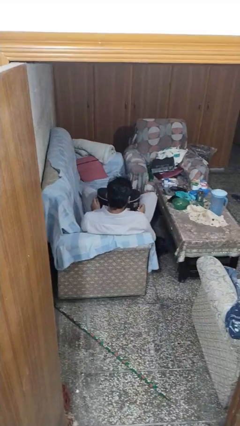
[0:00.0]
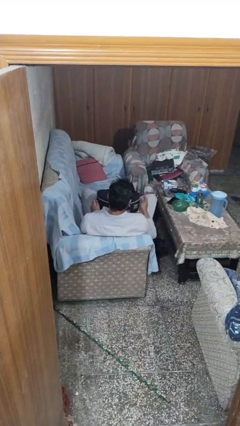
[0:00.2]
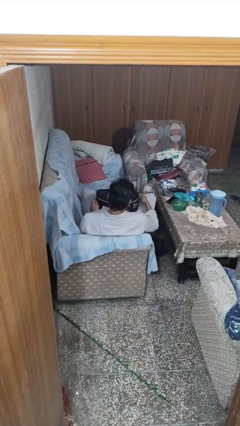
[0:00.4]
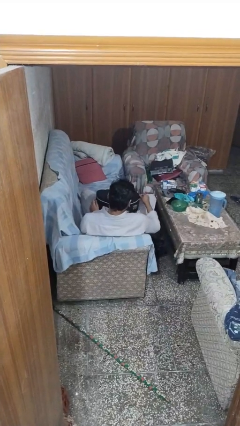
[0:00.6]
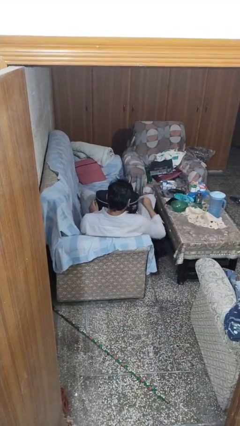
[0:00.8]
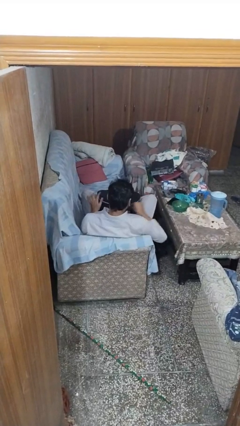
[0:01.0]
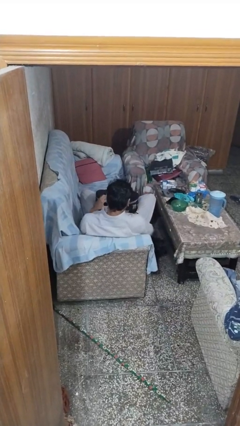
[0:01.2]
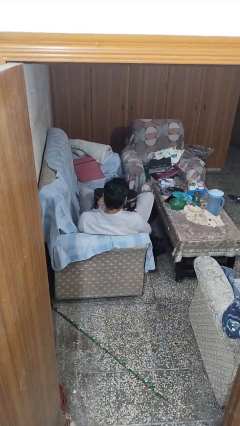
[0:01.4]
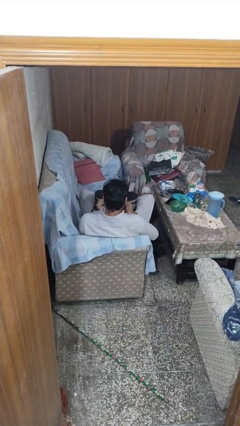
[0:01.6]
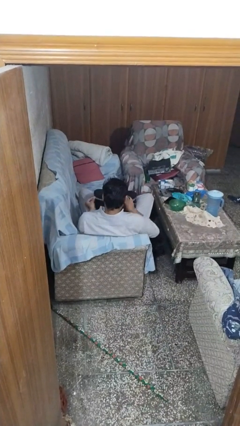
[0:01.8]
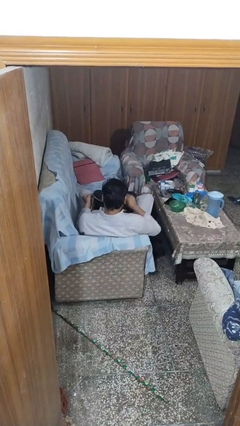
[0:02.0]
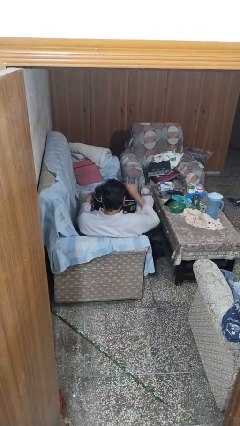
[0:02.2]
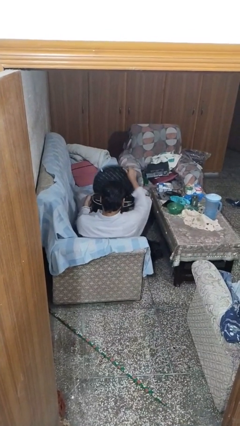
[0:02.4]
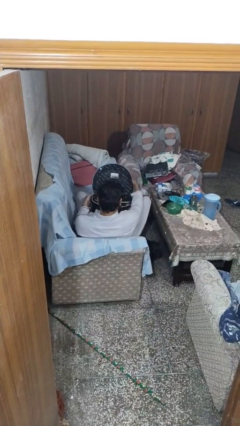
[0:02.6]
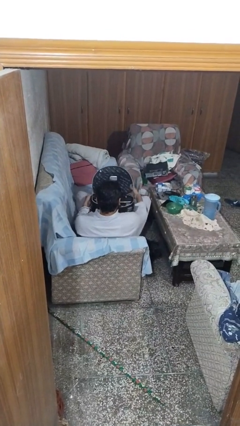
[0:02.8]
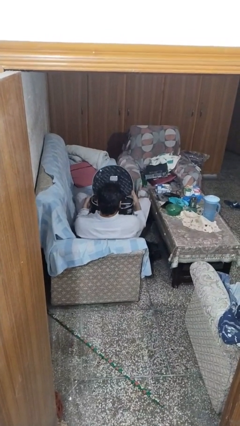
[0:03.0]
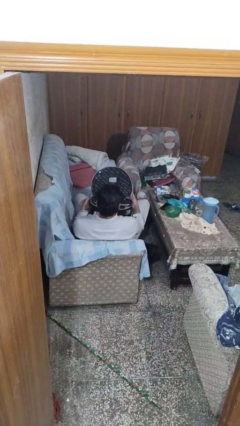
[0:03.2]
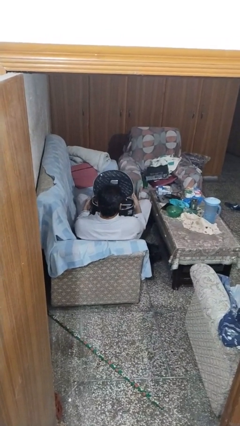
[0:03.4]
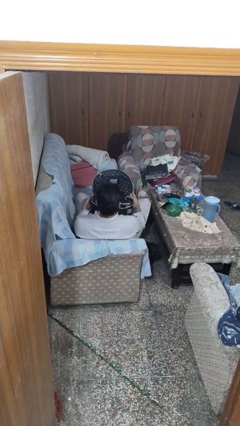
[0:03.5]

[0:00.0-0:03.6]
person opens suitcase

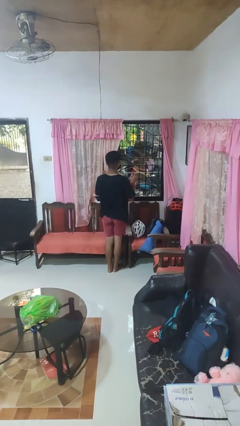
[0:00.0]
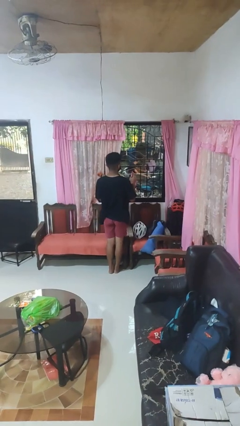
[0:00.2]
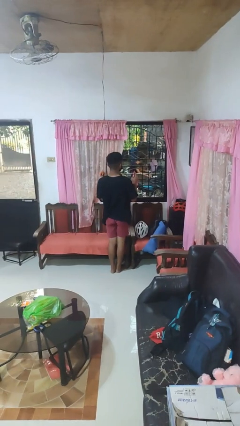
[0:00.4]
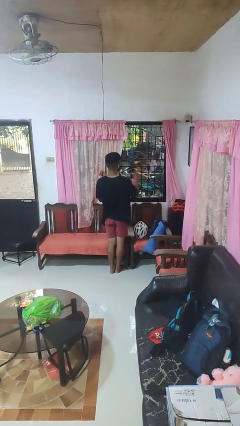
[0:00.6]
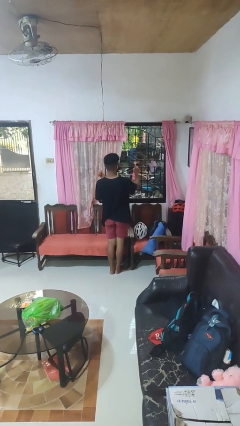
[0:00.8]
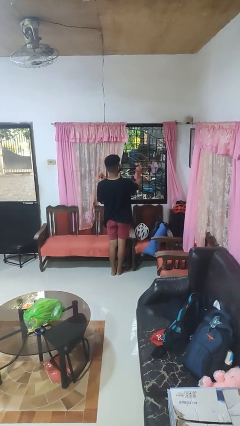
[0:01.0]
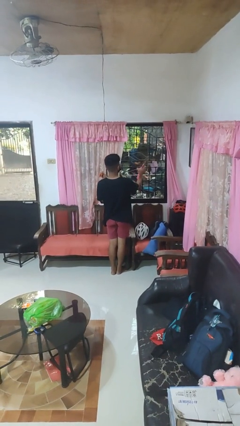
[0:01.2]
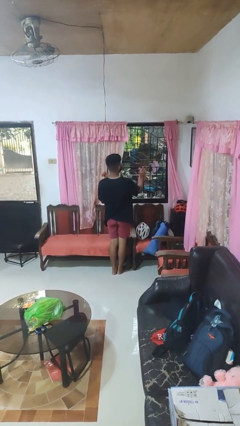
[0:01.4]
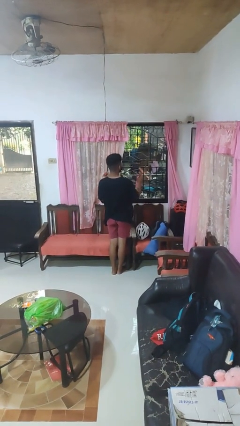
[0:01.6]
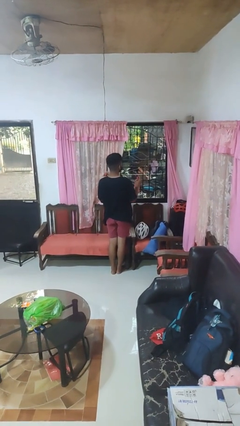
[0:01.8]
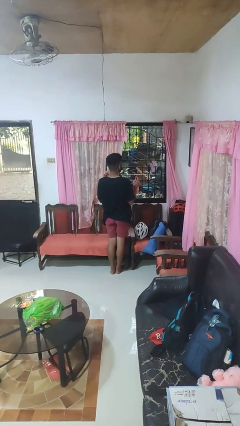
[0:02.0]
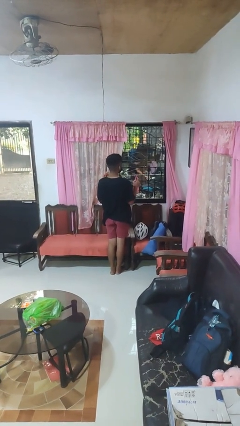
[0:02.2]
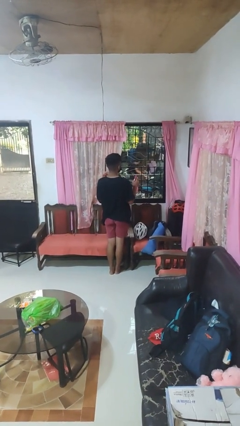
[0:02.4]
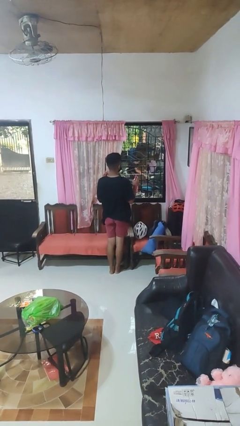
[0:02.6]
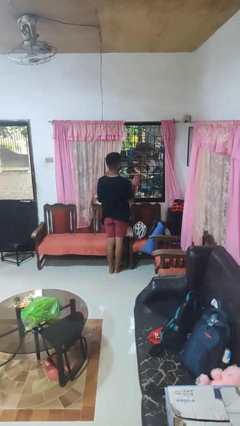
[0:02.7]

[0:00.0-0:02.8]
person sprays from bottle

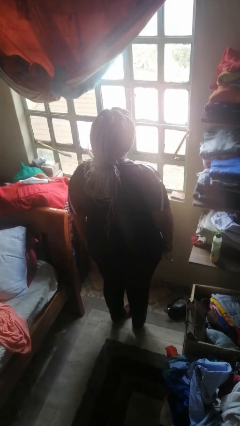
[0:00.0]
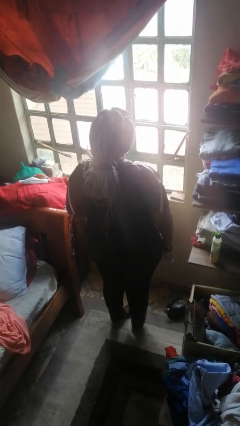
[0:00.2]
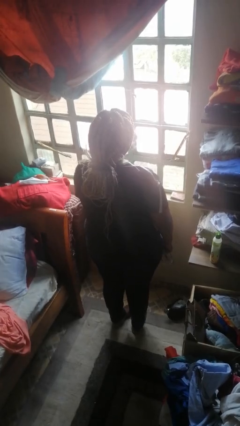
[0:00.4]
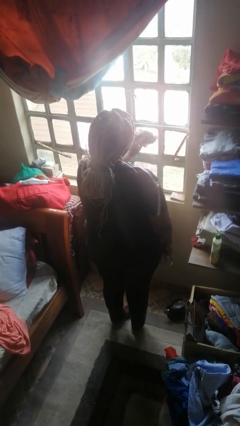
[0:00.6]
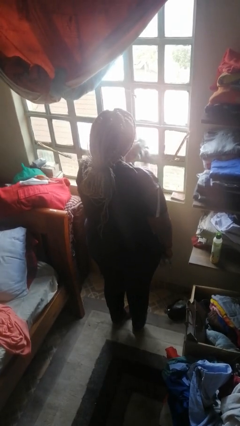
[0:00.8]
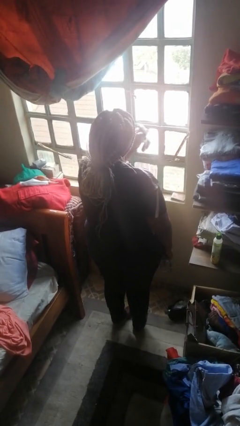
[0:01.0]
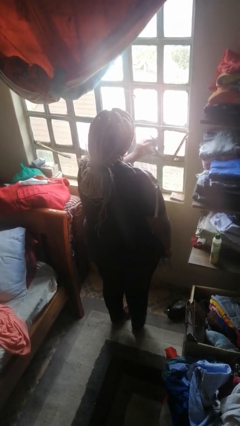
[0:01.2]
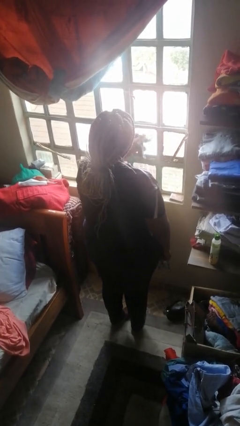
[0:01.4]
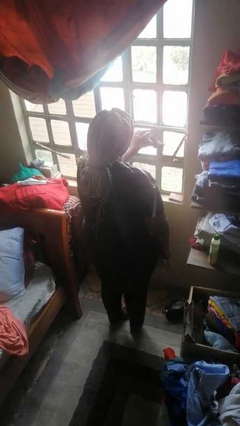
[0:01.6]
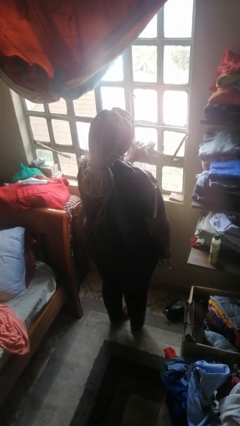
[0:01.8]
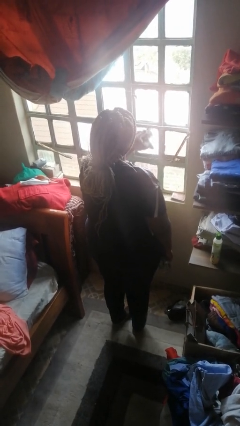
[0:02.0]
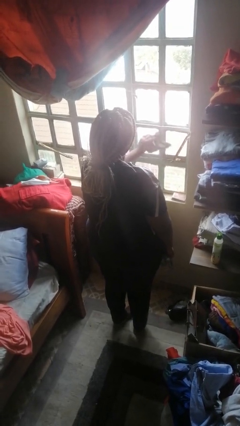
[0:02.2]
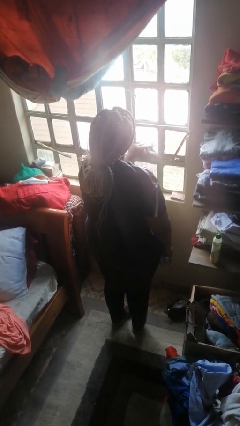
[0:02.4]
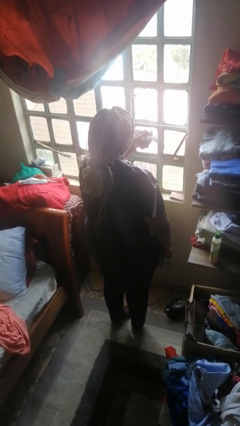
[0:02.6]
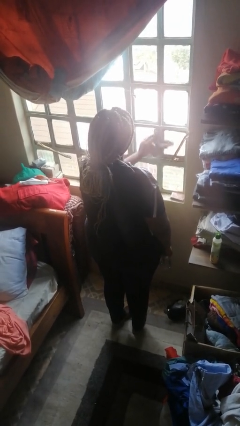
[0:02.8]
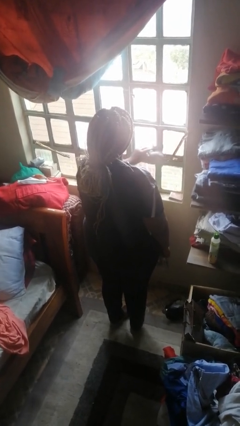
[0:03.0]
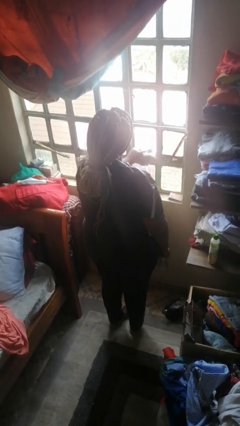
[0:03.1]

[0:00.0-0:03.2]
person washes window

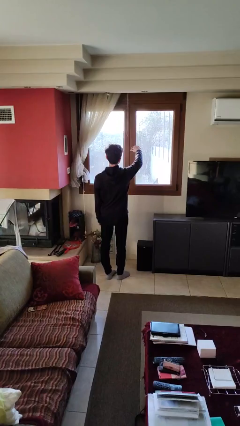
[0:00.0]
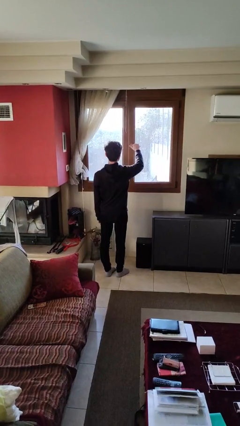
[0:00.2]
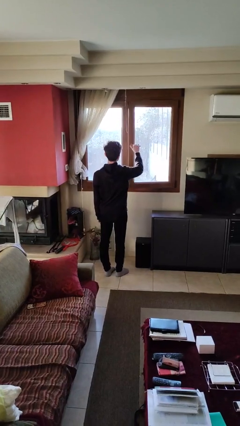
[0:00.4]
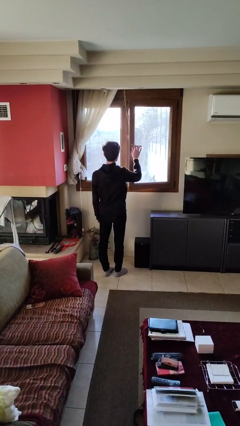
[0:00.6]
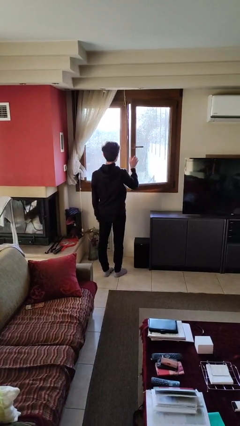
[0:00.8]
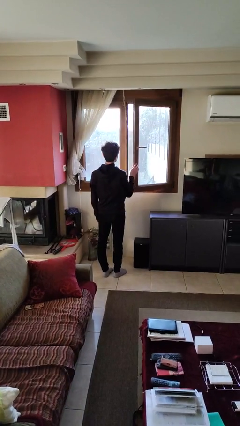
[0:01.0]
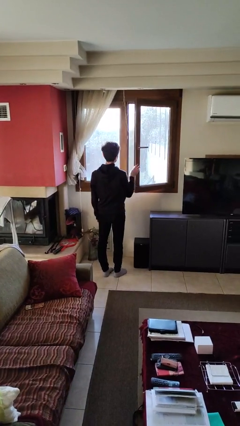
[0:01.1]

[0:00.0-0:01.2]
person opens home window

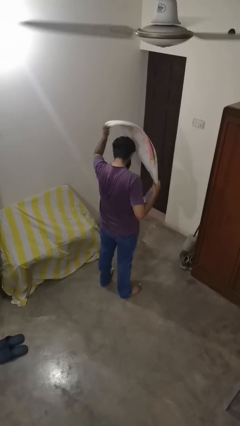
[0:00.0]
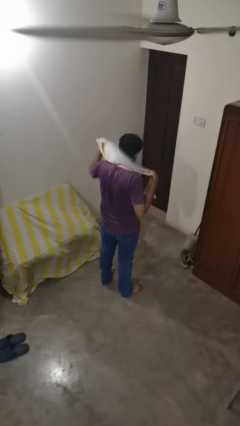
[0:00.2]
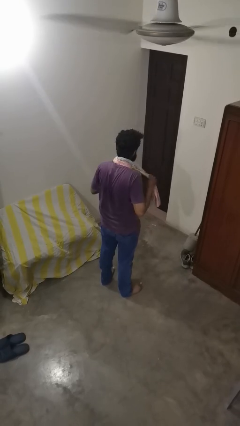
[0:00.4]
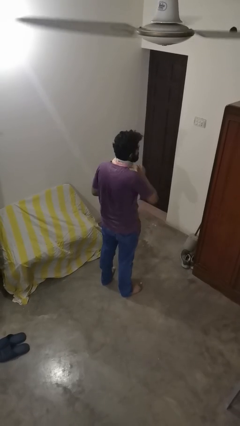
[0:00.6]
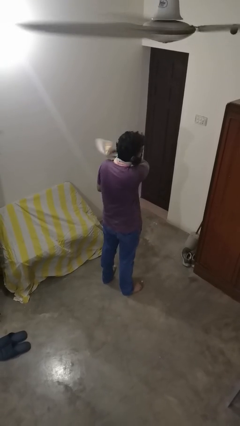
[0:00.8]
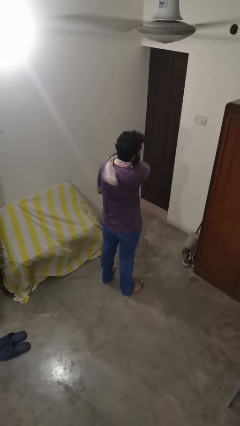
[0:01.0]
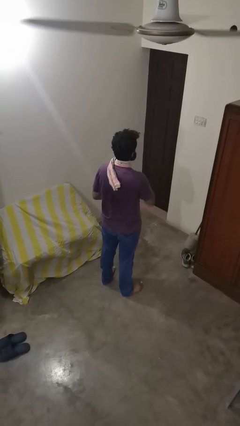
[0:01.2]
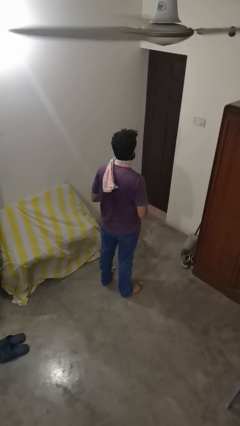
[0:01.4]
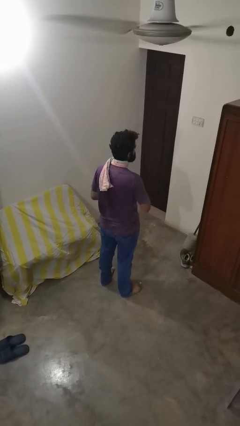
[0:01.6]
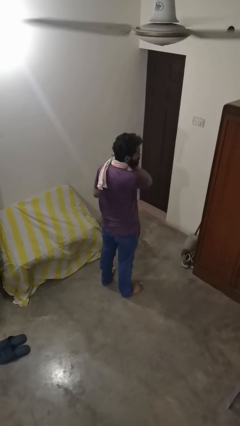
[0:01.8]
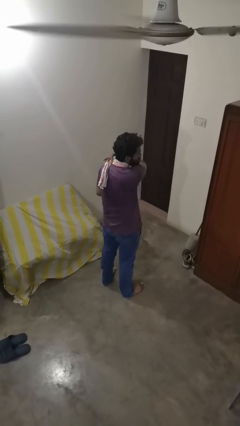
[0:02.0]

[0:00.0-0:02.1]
person puts on scarf

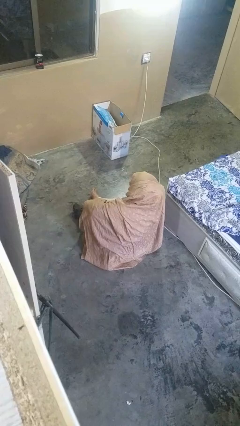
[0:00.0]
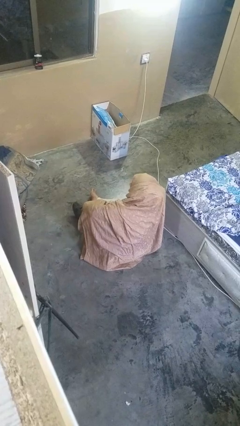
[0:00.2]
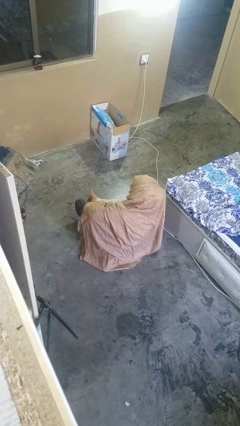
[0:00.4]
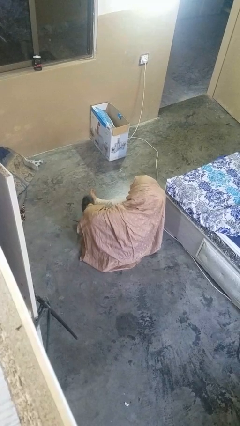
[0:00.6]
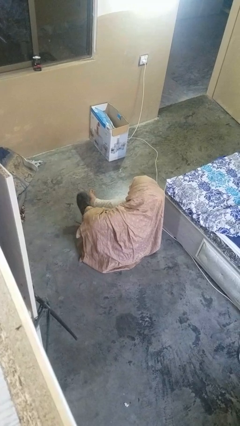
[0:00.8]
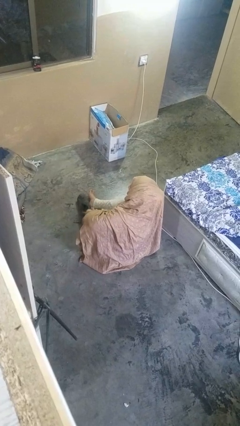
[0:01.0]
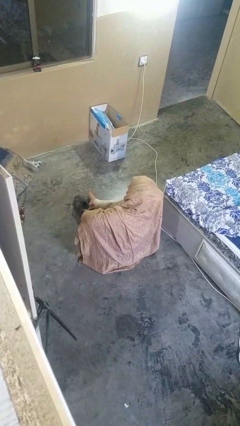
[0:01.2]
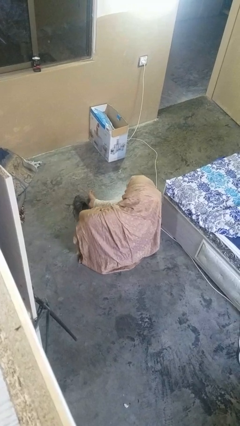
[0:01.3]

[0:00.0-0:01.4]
person takes off shoes

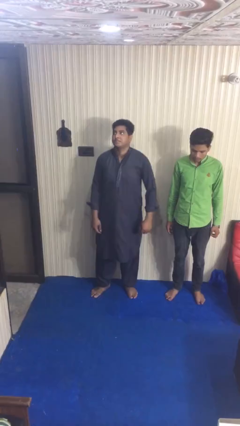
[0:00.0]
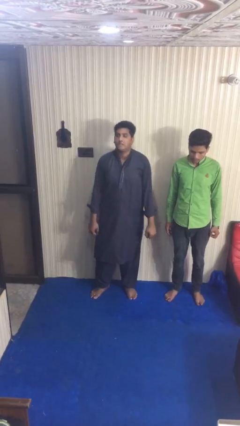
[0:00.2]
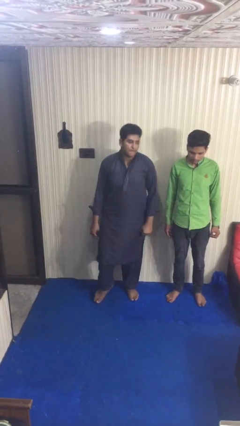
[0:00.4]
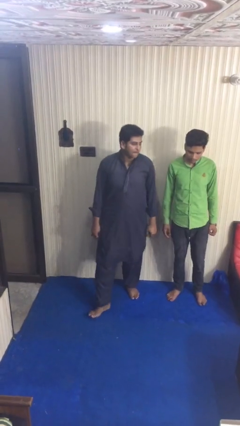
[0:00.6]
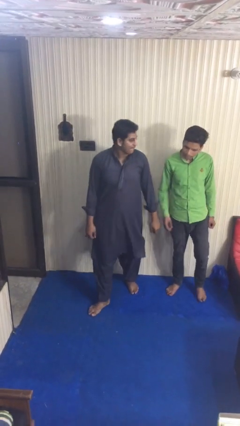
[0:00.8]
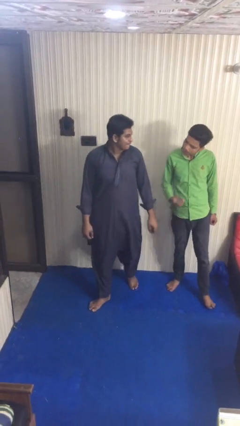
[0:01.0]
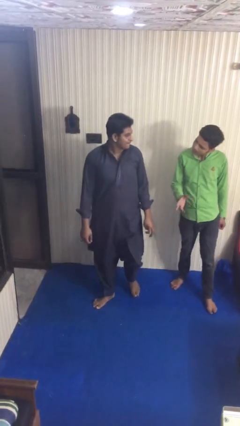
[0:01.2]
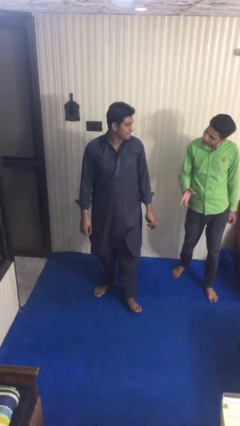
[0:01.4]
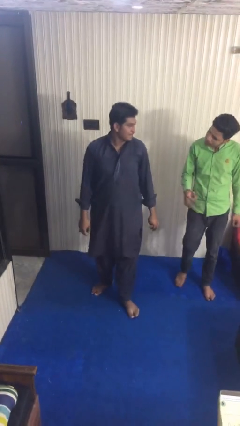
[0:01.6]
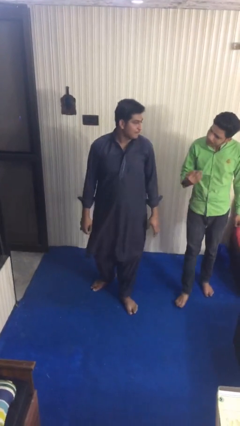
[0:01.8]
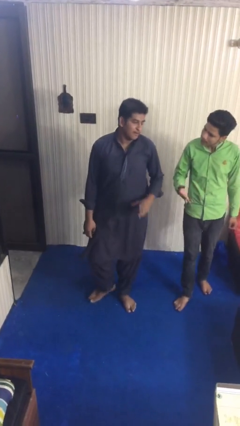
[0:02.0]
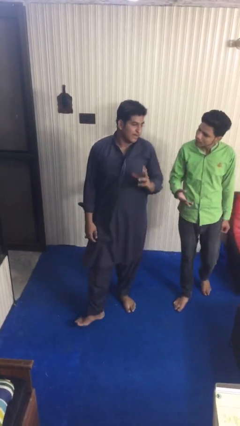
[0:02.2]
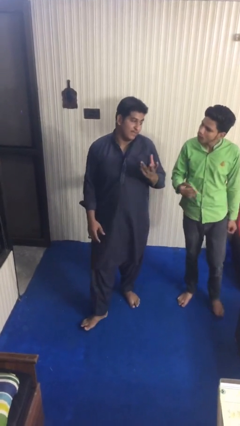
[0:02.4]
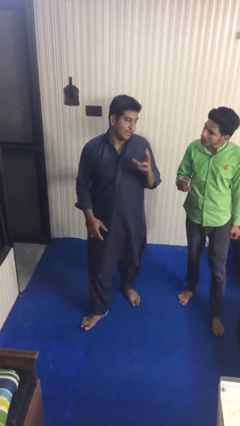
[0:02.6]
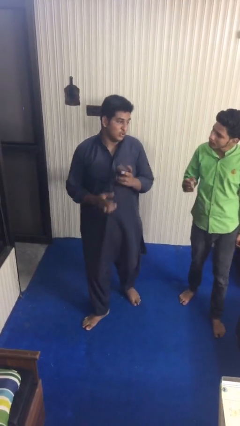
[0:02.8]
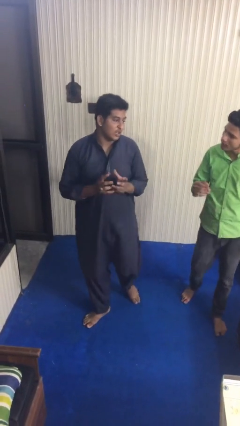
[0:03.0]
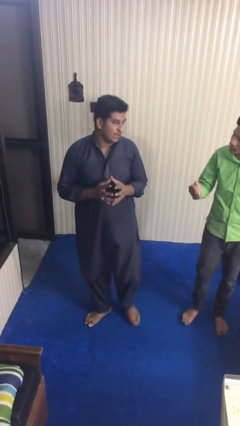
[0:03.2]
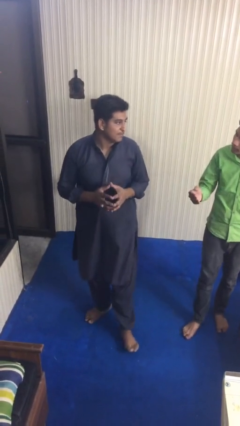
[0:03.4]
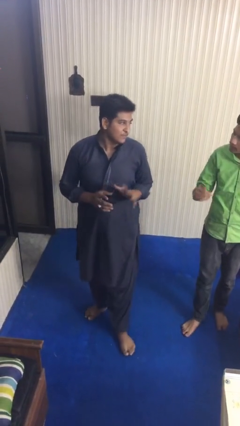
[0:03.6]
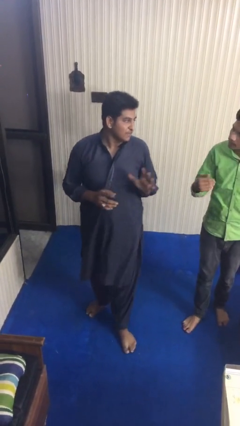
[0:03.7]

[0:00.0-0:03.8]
person talks to person
